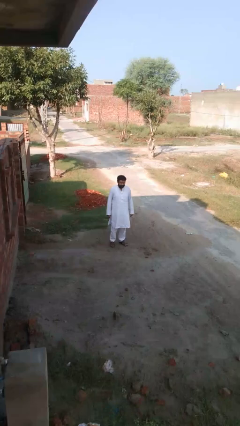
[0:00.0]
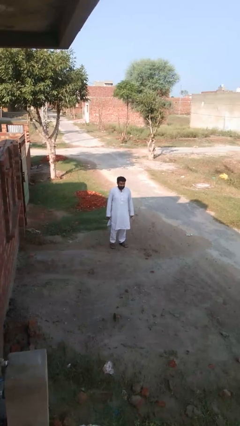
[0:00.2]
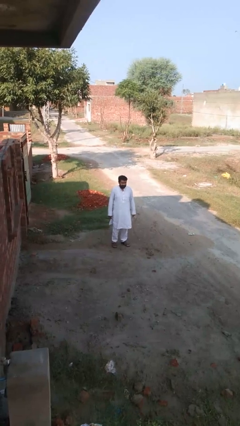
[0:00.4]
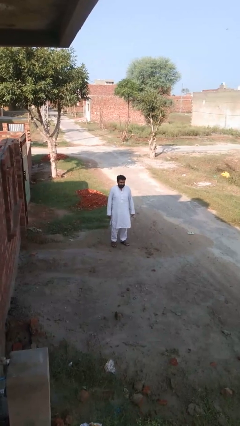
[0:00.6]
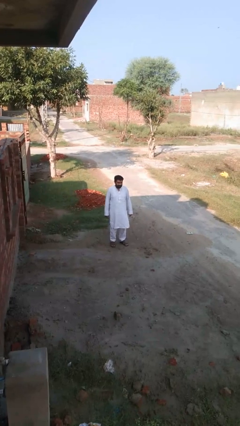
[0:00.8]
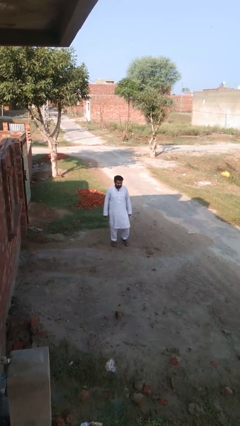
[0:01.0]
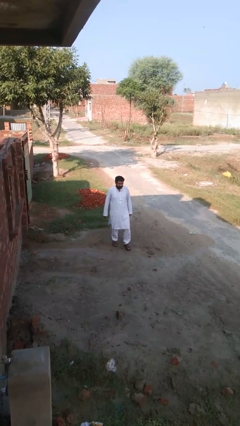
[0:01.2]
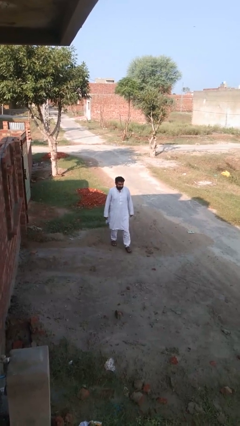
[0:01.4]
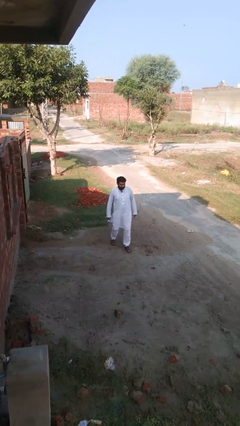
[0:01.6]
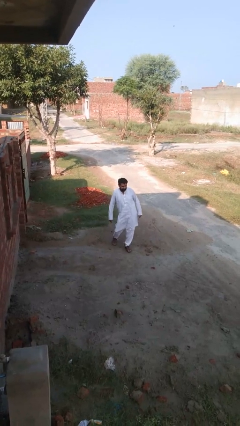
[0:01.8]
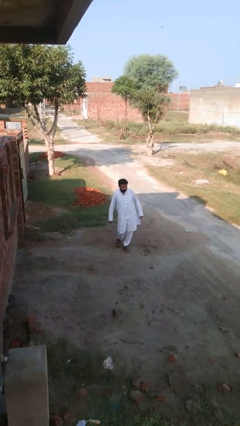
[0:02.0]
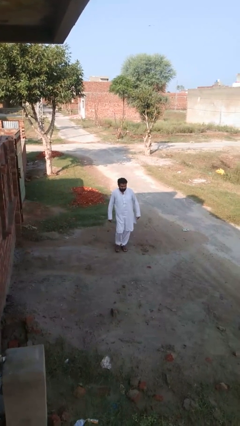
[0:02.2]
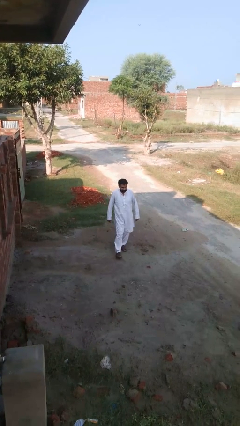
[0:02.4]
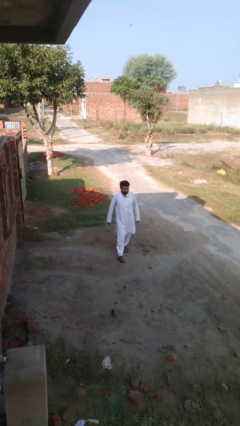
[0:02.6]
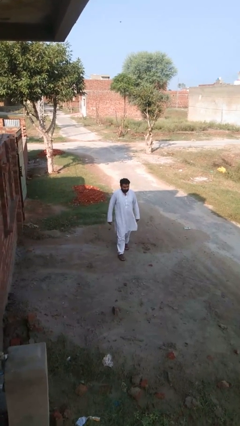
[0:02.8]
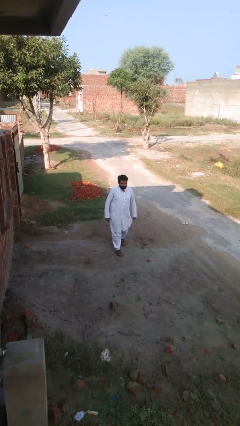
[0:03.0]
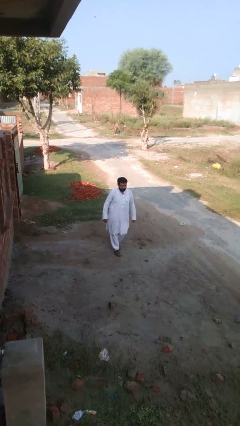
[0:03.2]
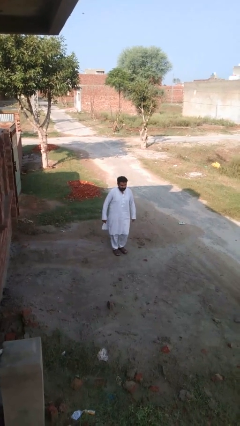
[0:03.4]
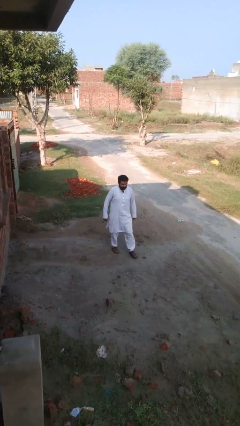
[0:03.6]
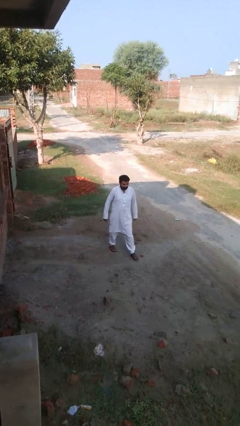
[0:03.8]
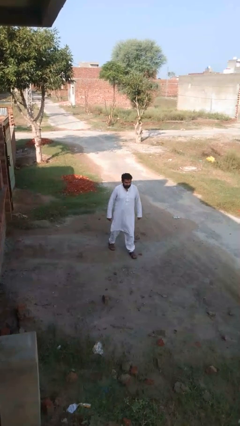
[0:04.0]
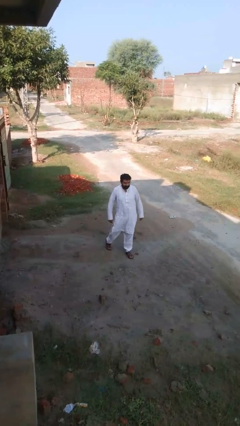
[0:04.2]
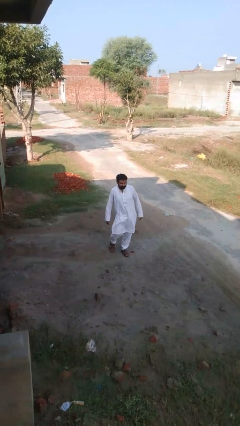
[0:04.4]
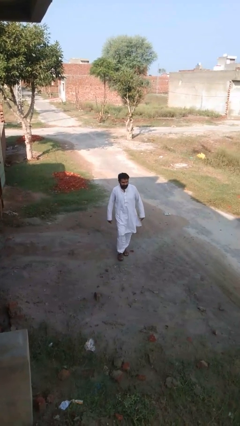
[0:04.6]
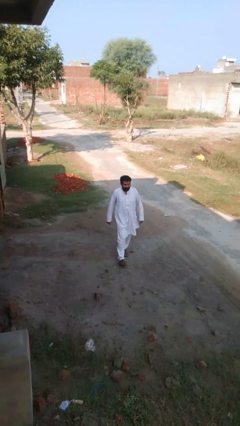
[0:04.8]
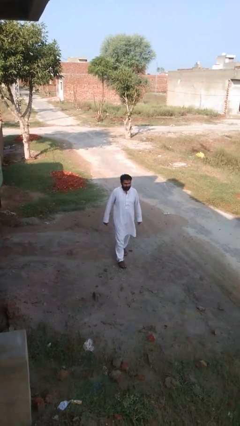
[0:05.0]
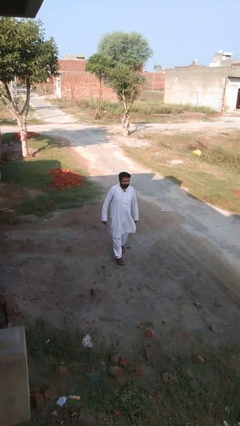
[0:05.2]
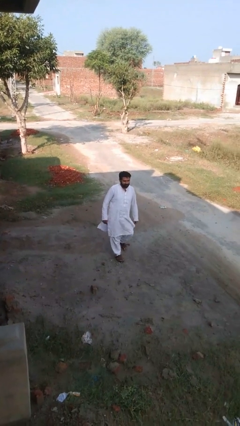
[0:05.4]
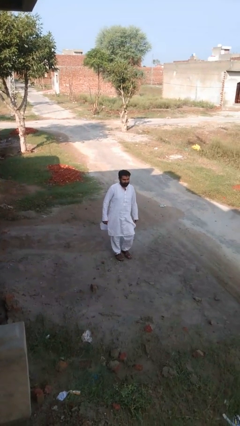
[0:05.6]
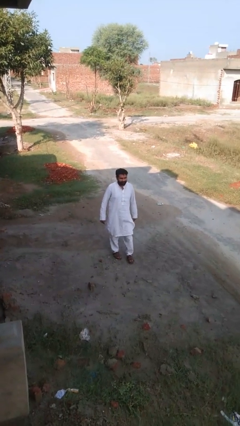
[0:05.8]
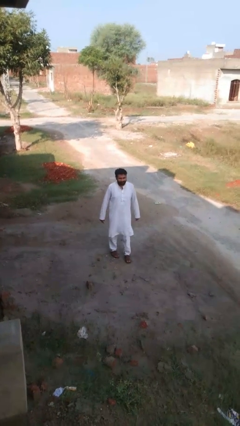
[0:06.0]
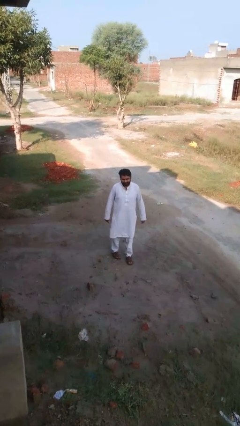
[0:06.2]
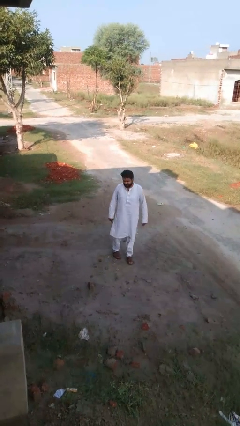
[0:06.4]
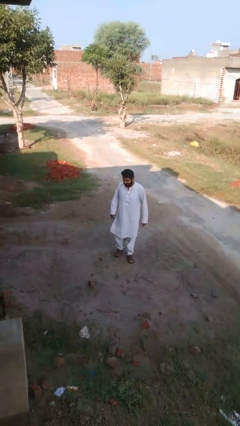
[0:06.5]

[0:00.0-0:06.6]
person walks tiptoe

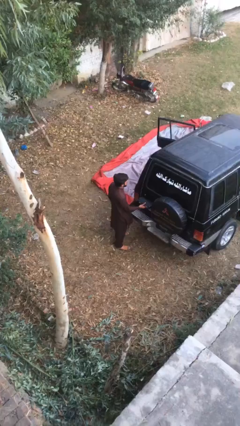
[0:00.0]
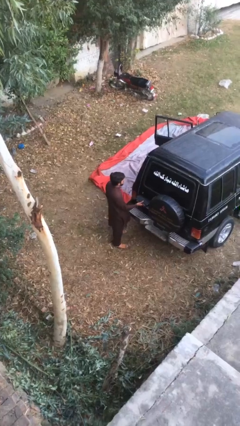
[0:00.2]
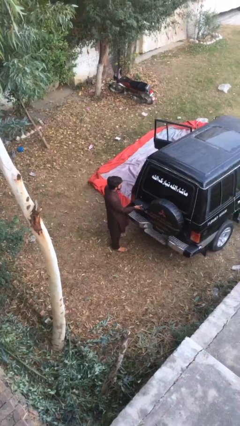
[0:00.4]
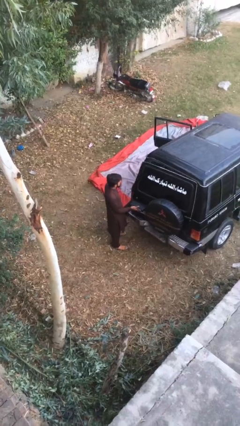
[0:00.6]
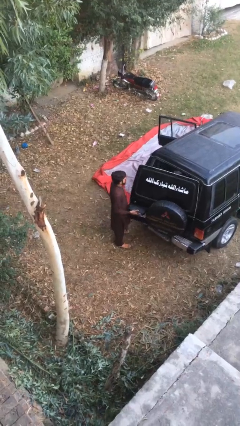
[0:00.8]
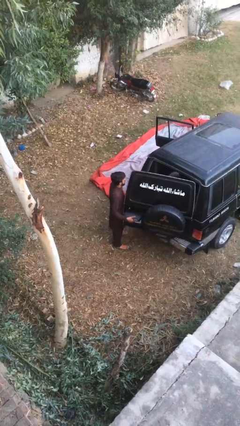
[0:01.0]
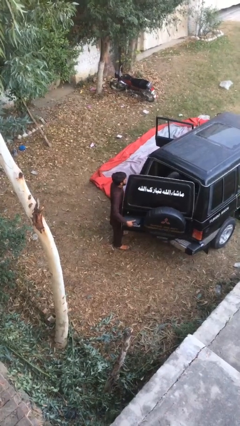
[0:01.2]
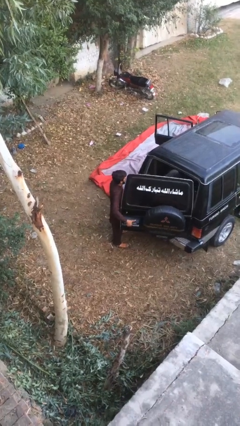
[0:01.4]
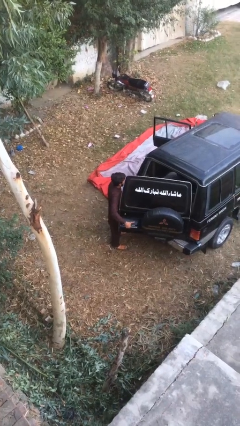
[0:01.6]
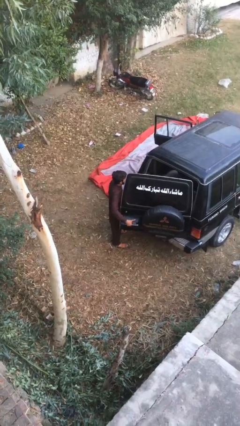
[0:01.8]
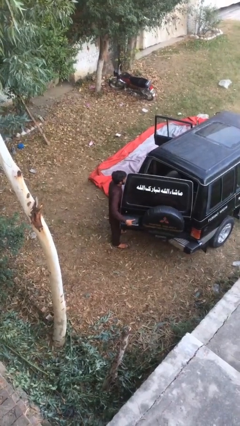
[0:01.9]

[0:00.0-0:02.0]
person opens car trunk

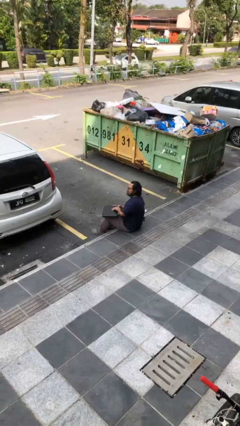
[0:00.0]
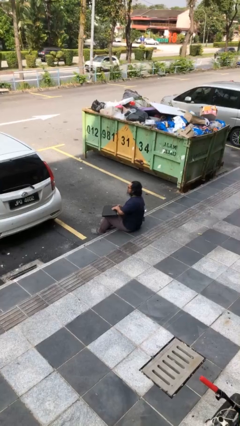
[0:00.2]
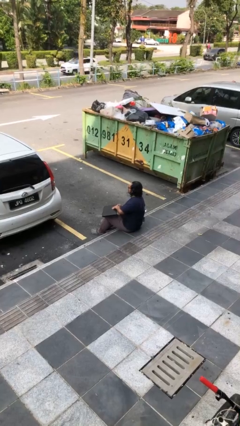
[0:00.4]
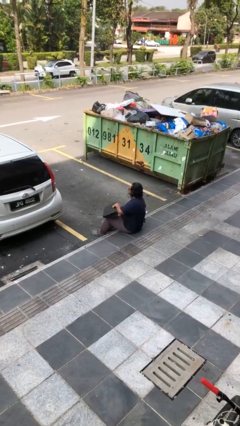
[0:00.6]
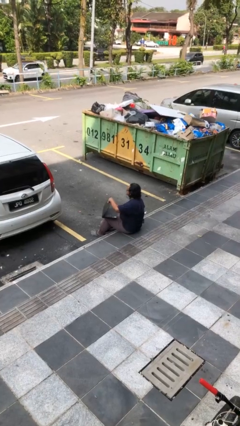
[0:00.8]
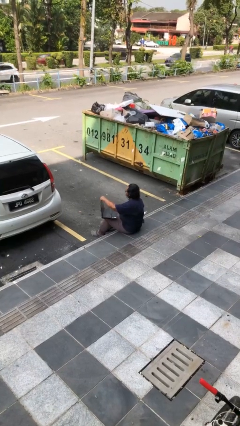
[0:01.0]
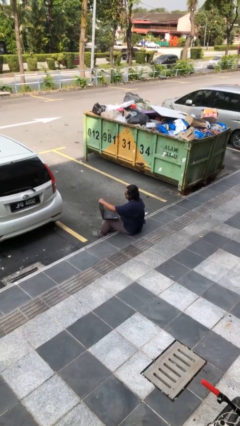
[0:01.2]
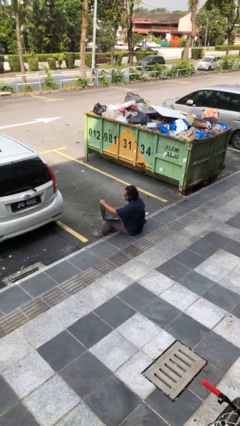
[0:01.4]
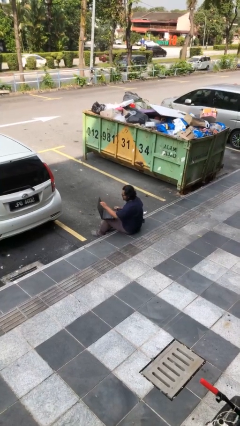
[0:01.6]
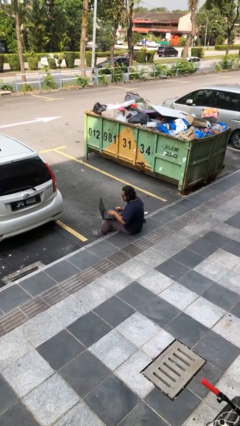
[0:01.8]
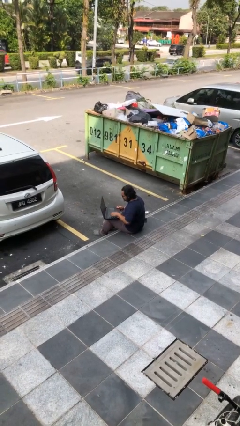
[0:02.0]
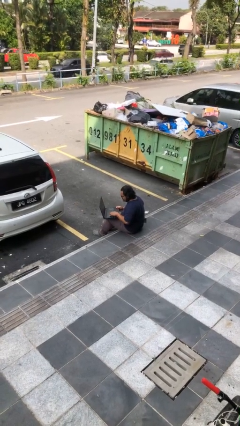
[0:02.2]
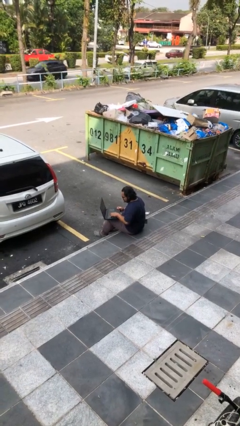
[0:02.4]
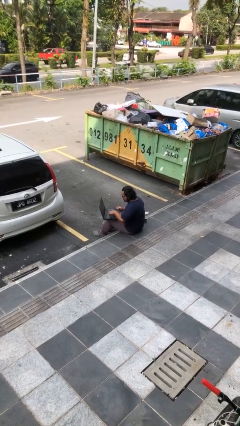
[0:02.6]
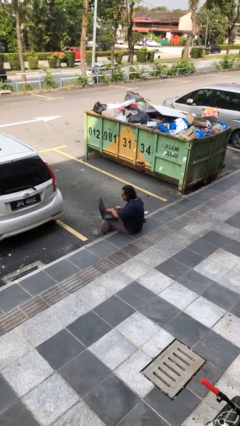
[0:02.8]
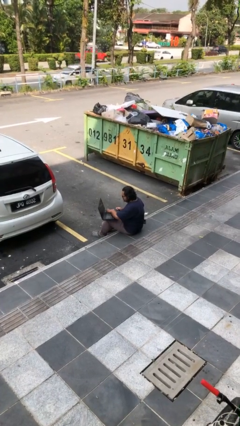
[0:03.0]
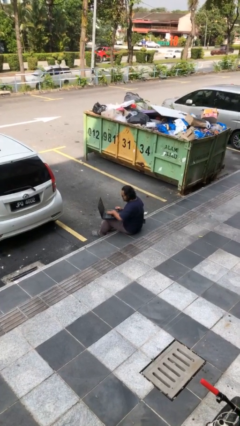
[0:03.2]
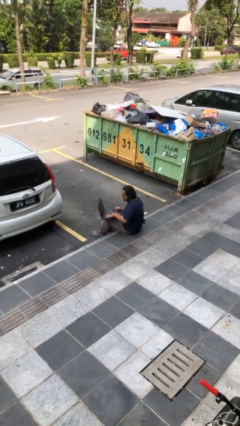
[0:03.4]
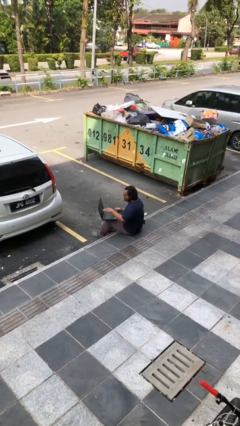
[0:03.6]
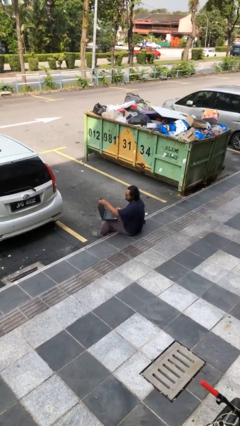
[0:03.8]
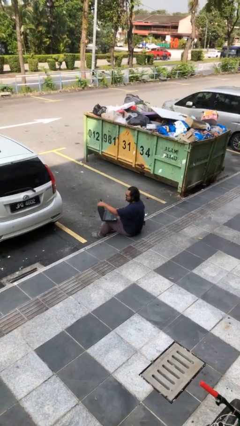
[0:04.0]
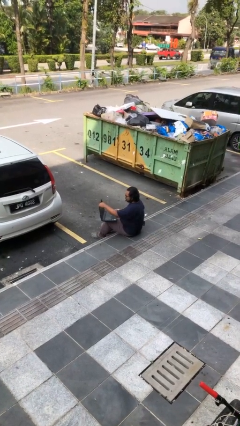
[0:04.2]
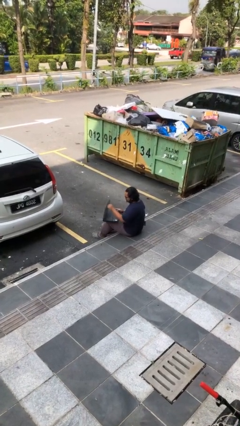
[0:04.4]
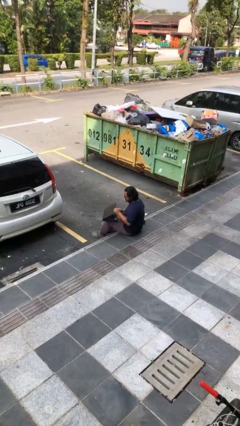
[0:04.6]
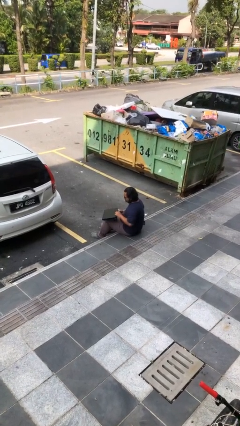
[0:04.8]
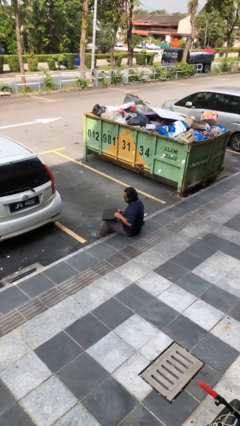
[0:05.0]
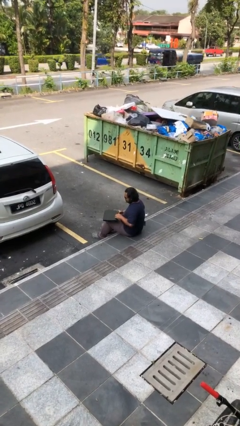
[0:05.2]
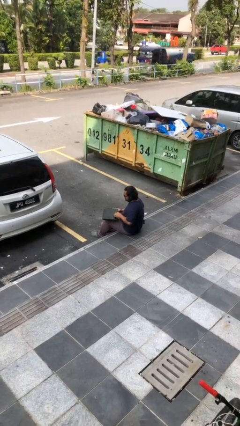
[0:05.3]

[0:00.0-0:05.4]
person interacts with laptop

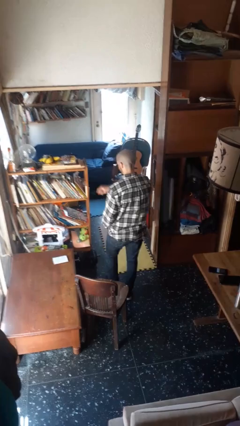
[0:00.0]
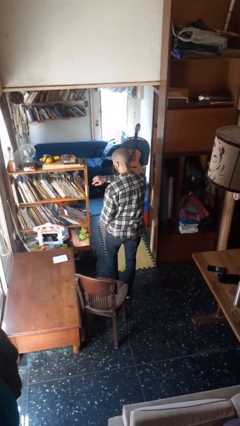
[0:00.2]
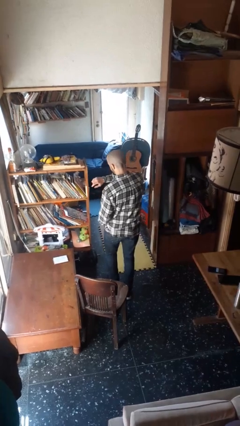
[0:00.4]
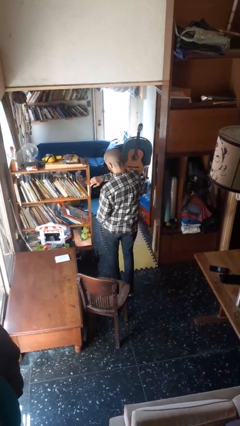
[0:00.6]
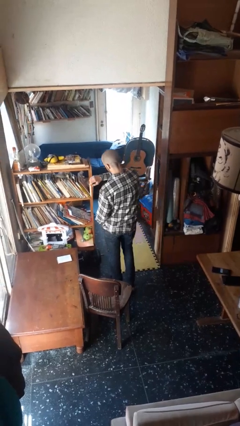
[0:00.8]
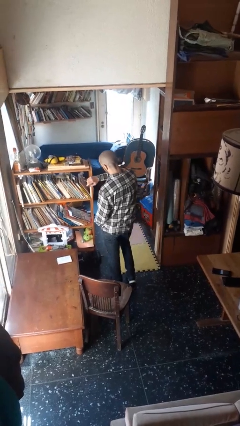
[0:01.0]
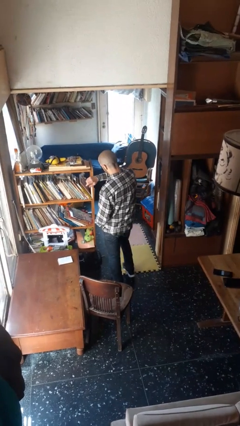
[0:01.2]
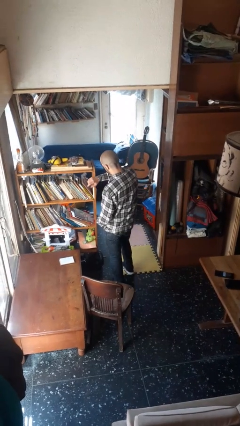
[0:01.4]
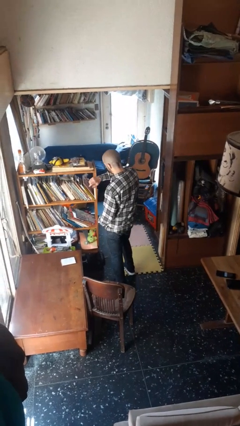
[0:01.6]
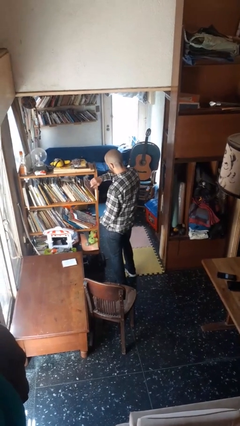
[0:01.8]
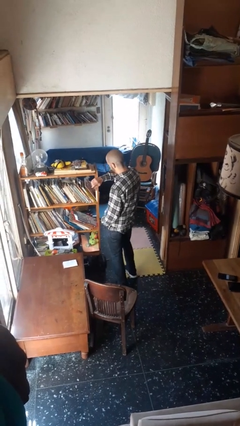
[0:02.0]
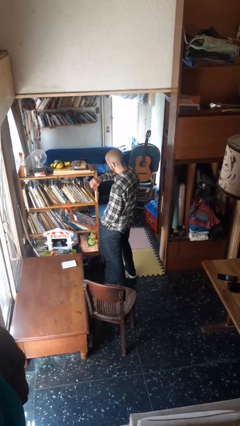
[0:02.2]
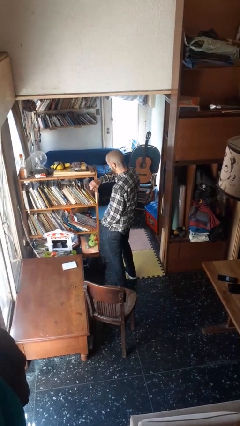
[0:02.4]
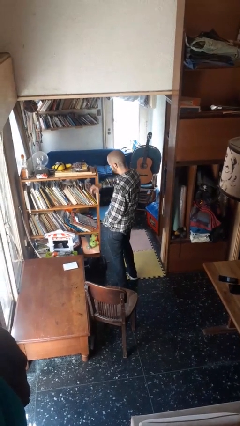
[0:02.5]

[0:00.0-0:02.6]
person looks at wristwatch

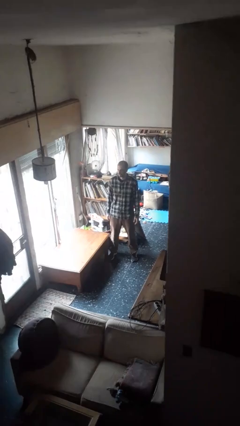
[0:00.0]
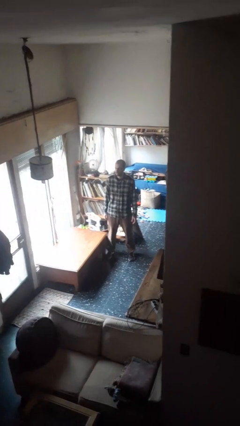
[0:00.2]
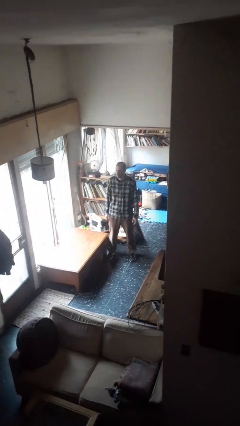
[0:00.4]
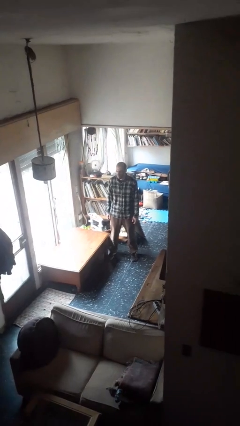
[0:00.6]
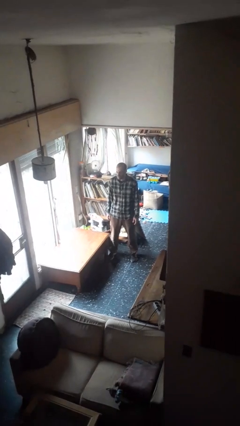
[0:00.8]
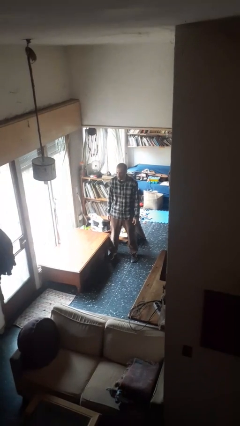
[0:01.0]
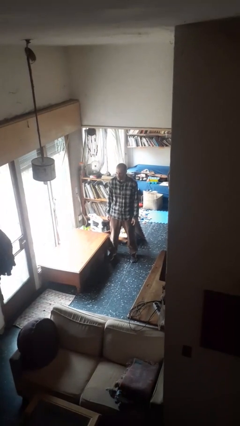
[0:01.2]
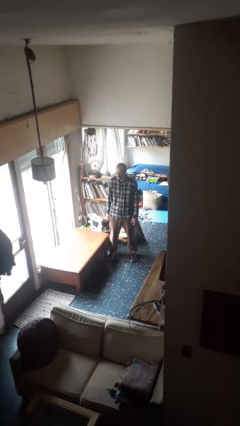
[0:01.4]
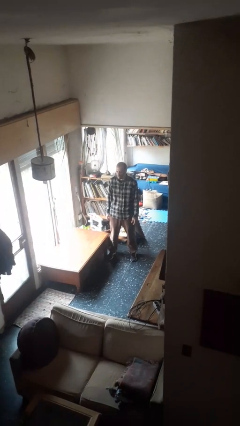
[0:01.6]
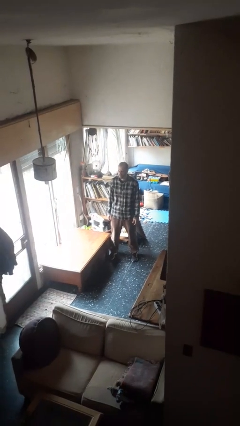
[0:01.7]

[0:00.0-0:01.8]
person sticks out tongue
